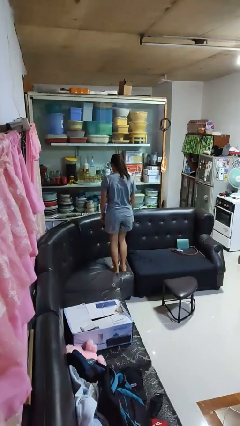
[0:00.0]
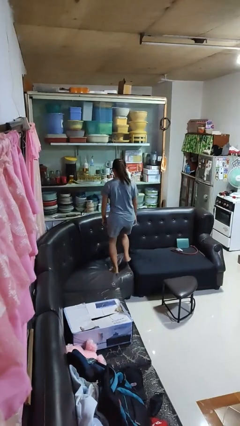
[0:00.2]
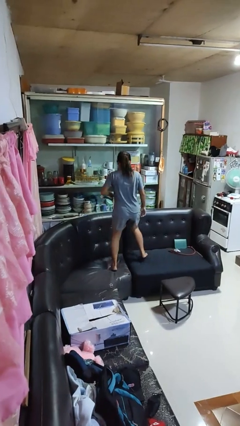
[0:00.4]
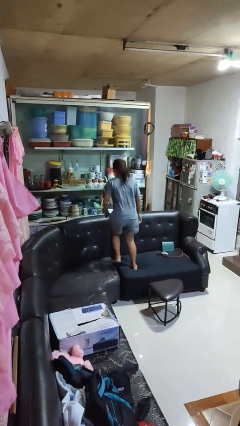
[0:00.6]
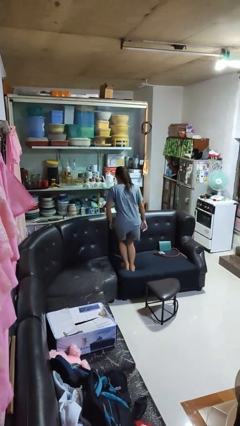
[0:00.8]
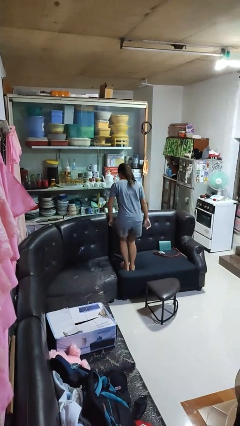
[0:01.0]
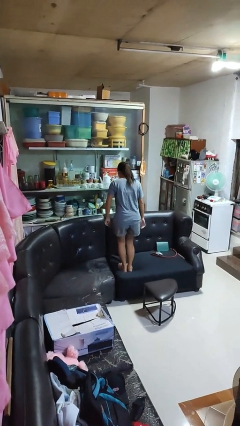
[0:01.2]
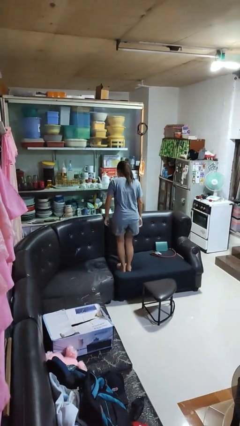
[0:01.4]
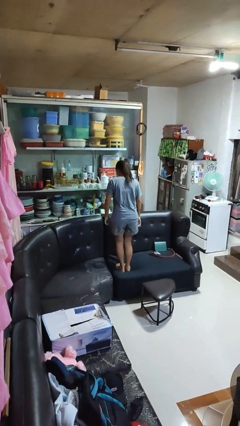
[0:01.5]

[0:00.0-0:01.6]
person jumps on couch

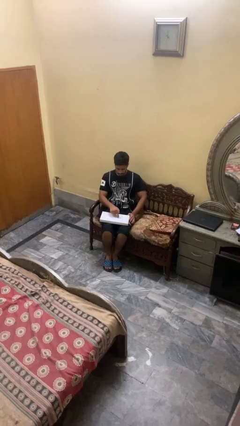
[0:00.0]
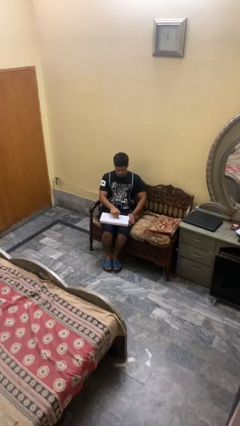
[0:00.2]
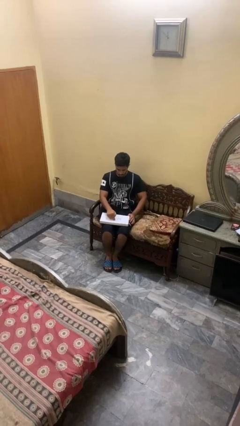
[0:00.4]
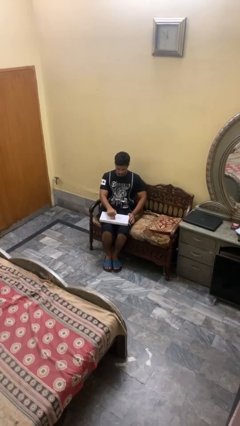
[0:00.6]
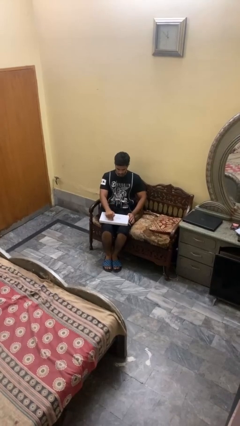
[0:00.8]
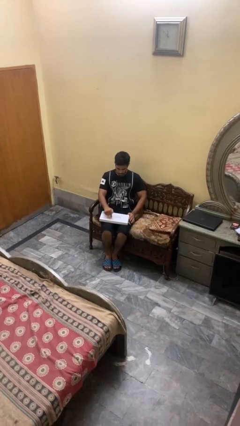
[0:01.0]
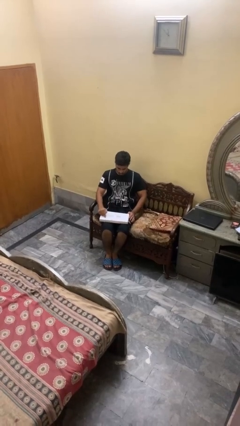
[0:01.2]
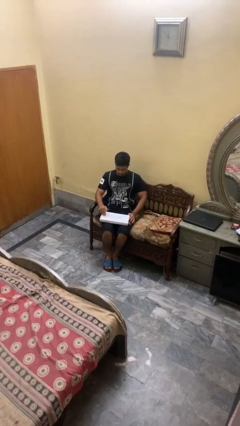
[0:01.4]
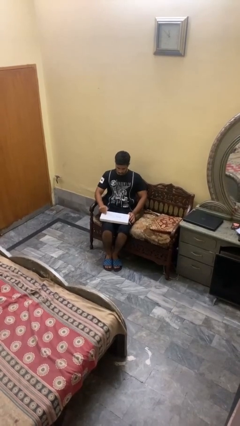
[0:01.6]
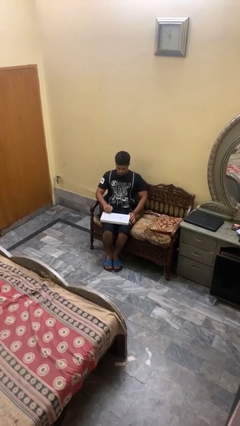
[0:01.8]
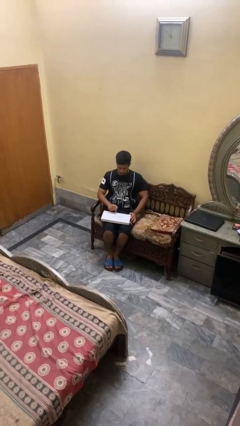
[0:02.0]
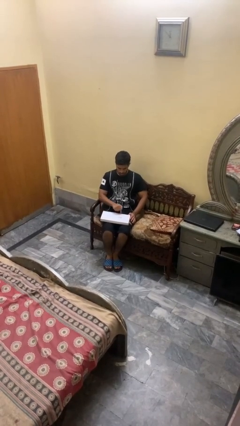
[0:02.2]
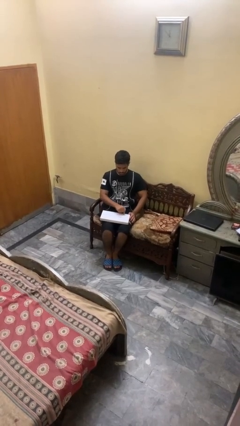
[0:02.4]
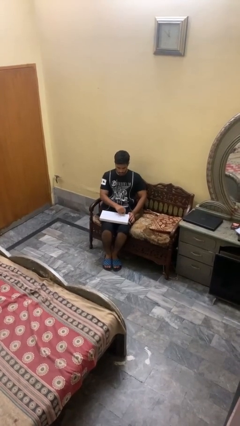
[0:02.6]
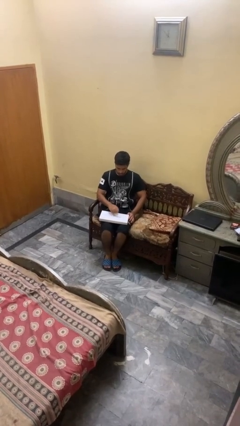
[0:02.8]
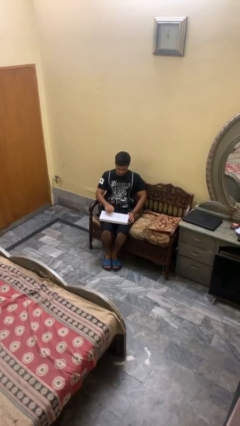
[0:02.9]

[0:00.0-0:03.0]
person taps object with finger

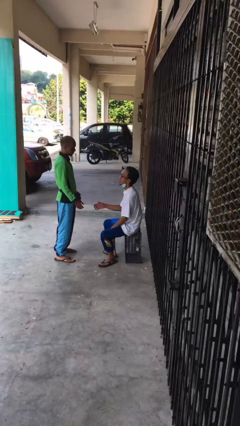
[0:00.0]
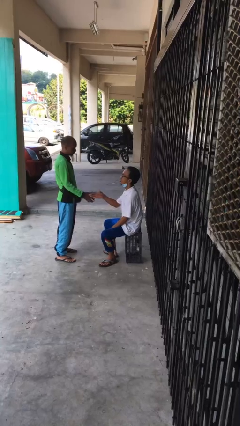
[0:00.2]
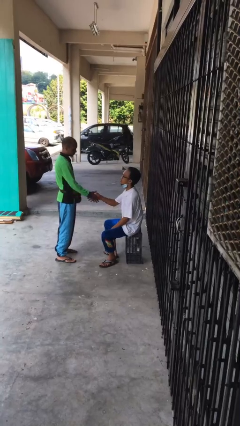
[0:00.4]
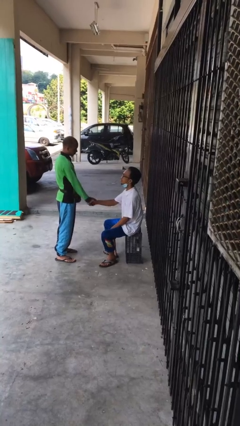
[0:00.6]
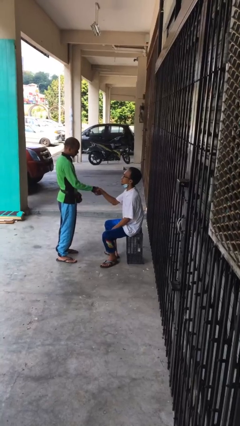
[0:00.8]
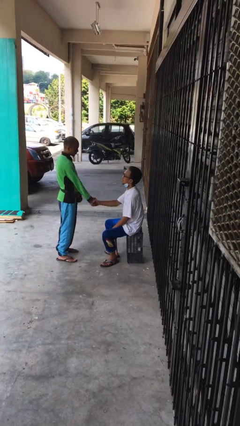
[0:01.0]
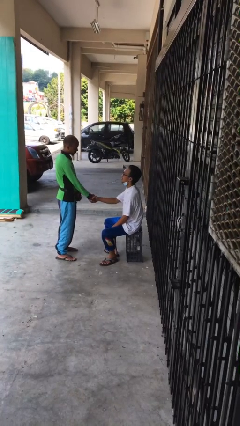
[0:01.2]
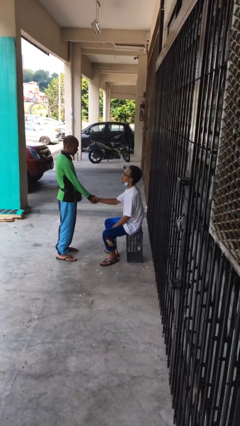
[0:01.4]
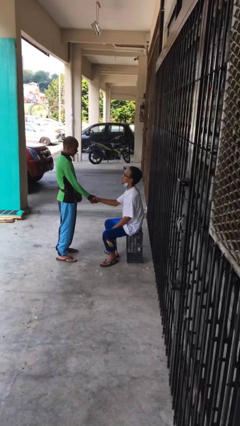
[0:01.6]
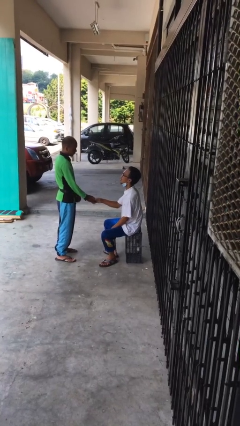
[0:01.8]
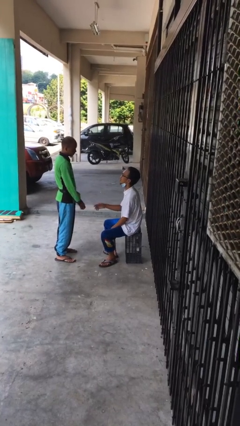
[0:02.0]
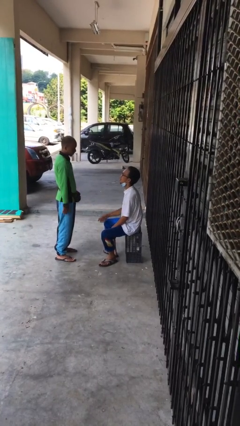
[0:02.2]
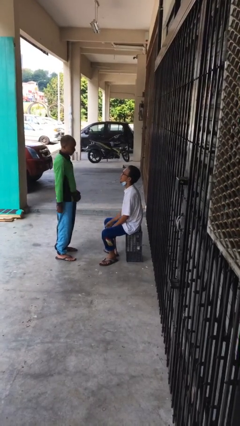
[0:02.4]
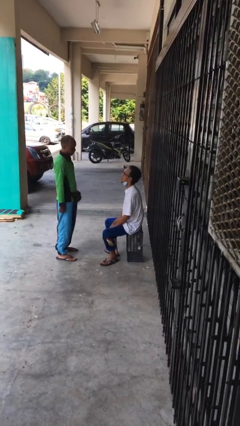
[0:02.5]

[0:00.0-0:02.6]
person shakes hand

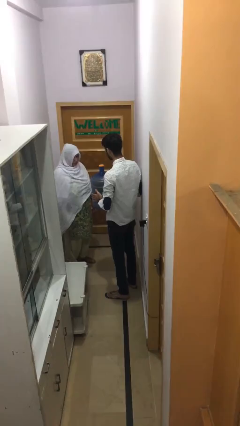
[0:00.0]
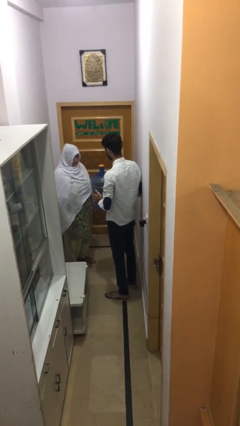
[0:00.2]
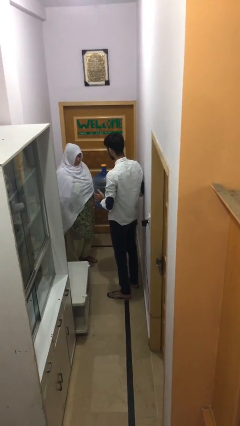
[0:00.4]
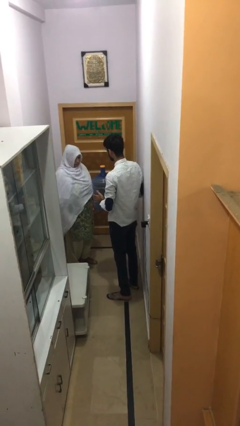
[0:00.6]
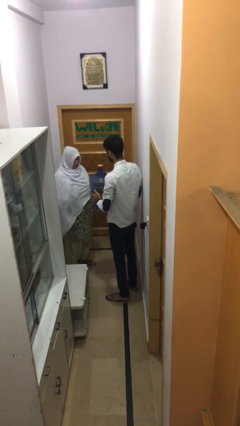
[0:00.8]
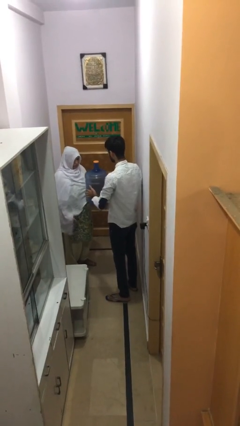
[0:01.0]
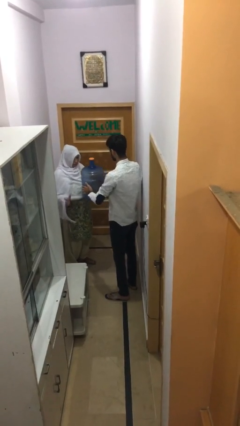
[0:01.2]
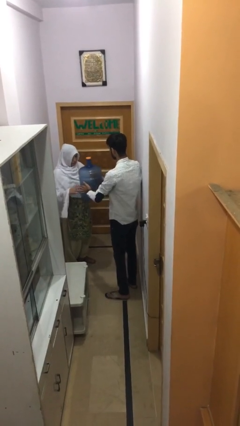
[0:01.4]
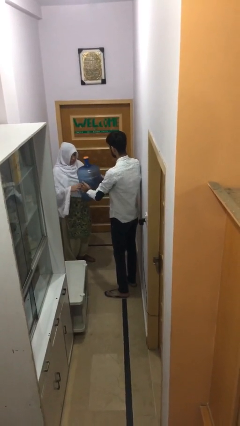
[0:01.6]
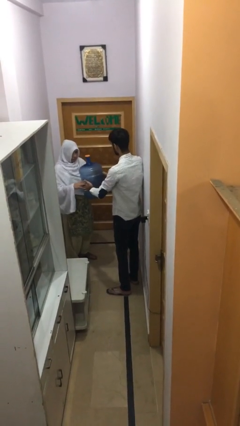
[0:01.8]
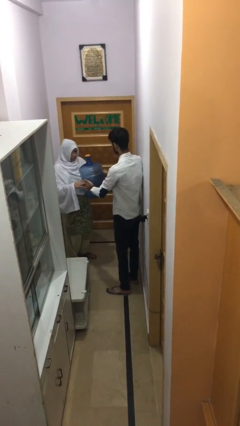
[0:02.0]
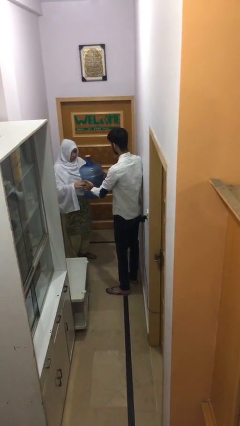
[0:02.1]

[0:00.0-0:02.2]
person transfers object to person

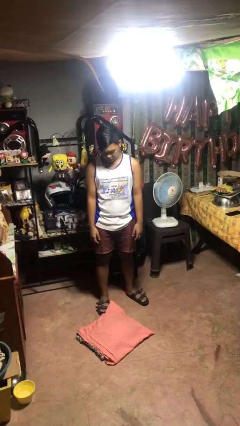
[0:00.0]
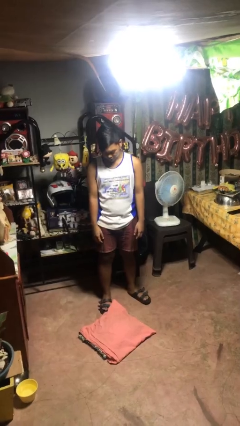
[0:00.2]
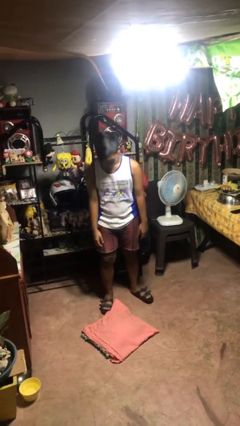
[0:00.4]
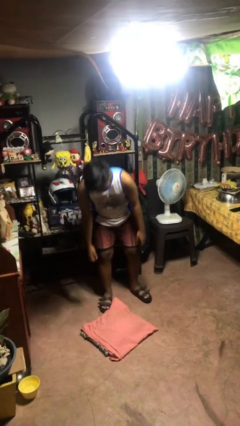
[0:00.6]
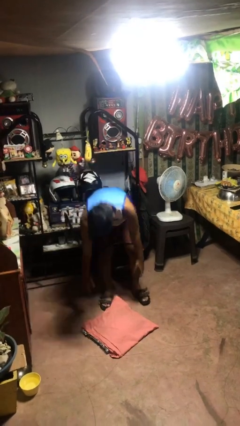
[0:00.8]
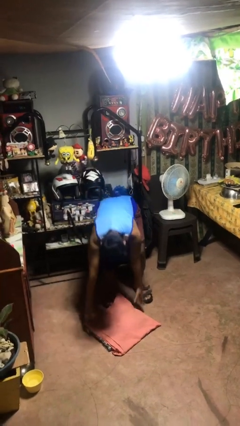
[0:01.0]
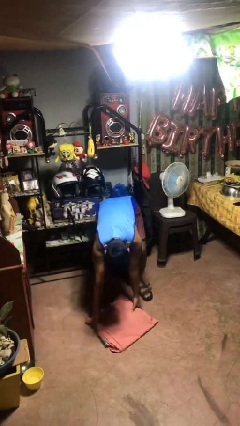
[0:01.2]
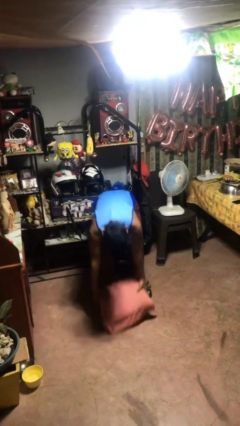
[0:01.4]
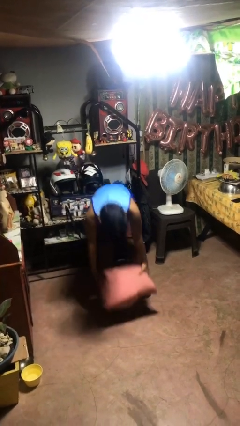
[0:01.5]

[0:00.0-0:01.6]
person picks up object from floor

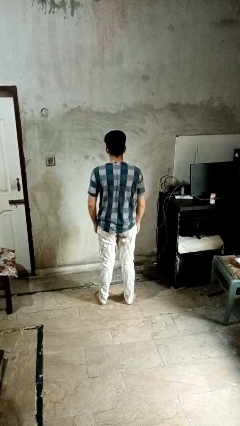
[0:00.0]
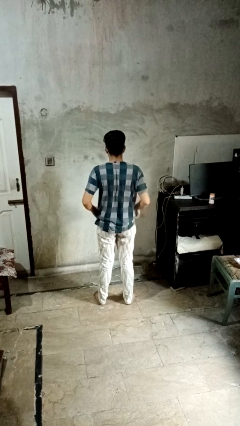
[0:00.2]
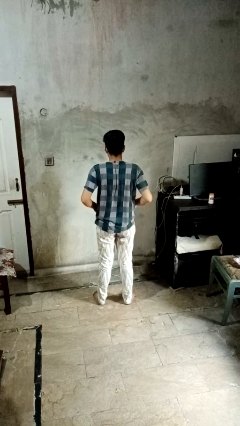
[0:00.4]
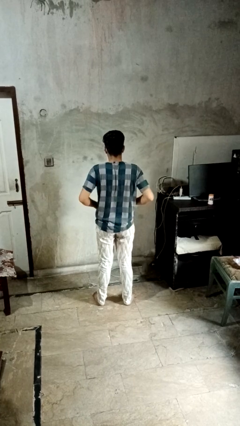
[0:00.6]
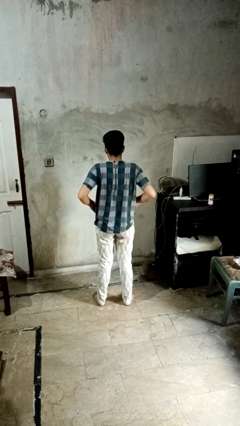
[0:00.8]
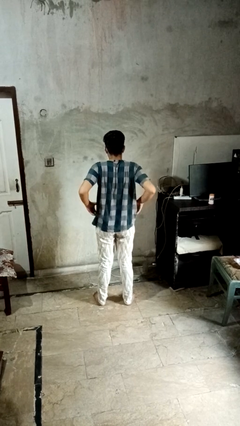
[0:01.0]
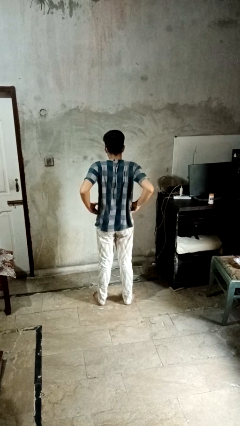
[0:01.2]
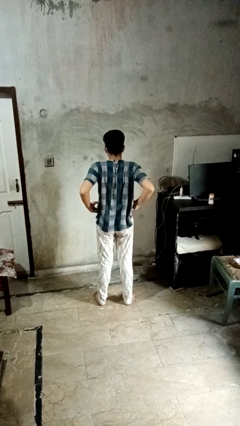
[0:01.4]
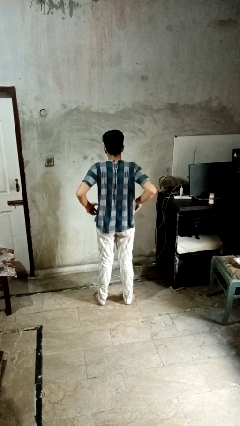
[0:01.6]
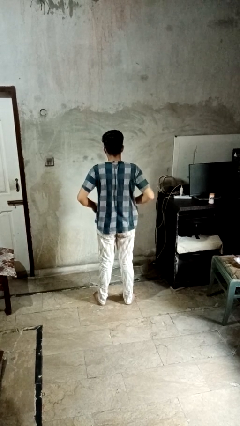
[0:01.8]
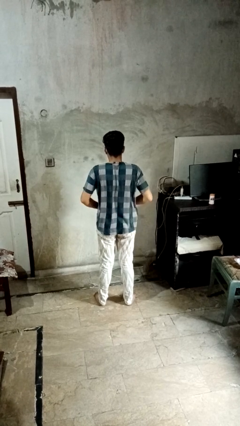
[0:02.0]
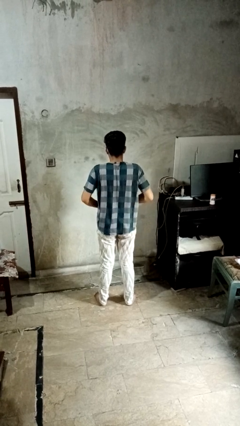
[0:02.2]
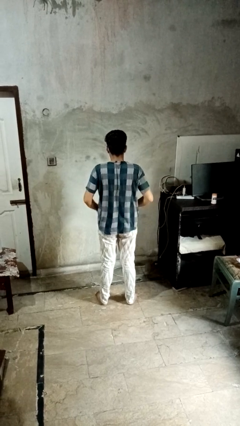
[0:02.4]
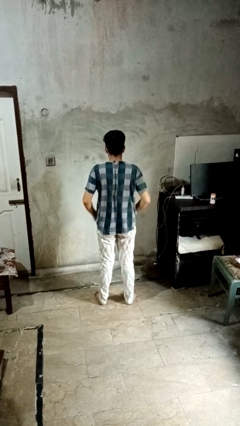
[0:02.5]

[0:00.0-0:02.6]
person hikes up pants

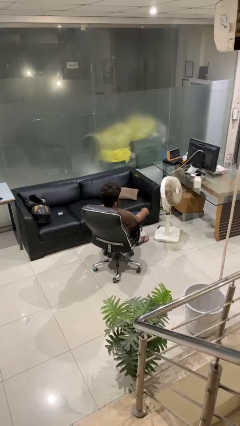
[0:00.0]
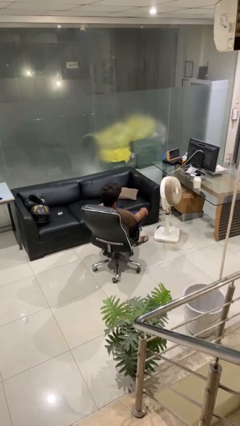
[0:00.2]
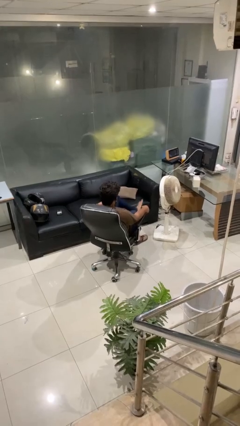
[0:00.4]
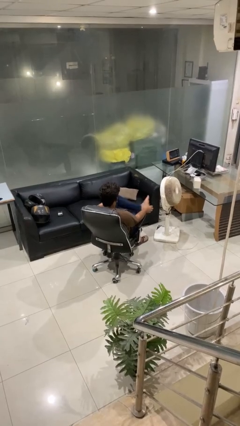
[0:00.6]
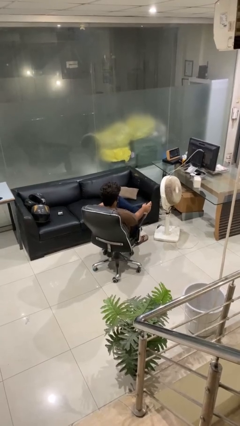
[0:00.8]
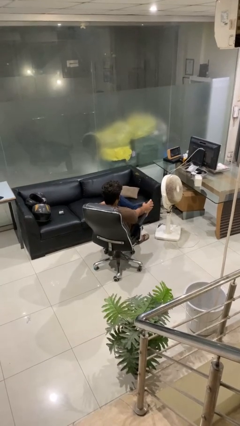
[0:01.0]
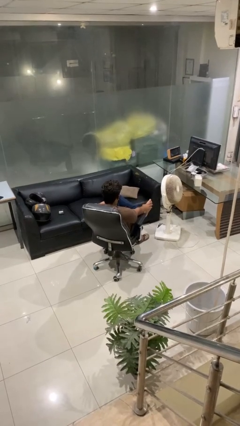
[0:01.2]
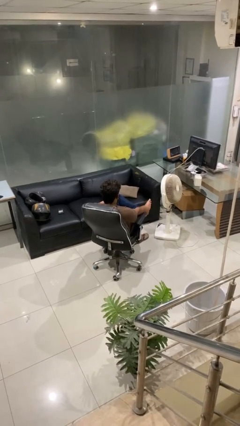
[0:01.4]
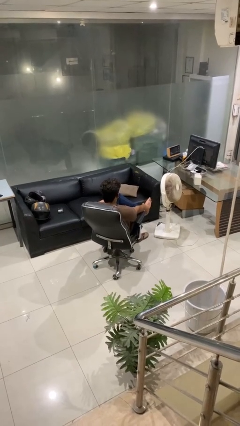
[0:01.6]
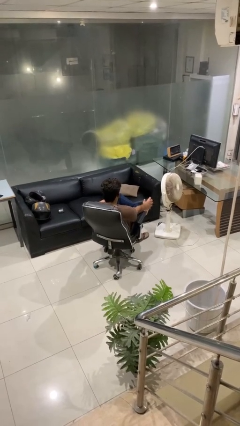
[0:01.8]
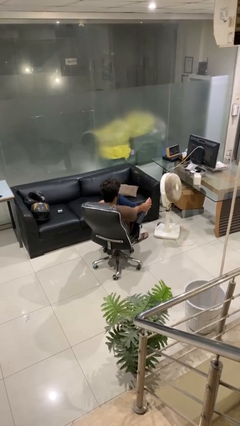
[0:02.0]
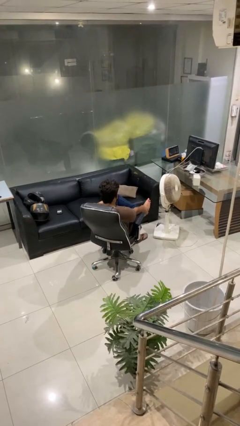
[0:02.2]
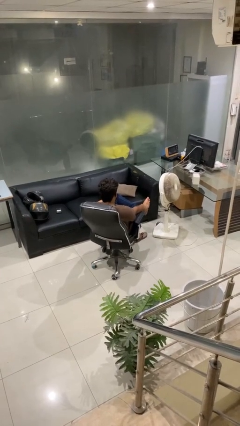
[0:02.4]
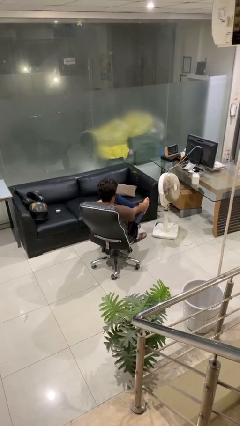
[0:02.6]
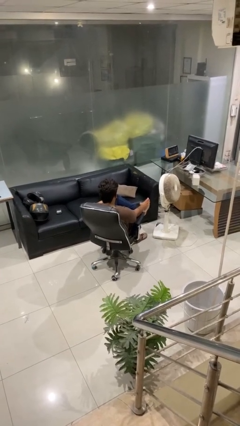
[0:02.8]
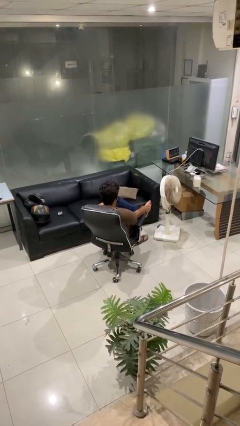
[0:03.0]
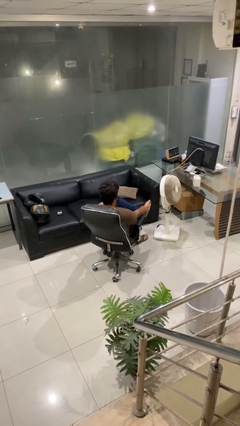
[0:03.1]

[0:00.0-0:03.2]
person rubs foot

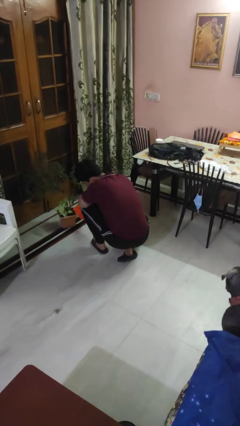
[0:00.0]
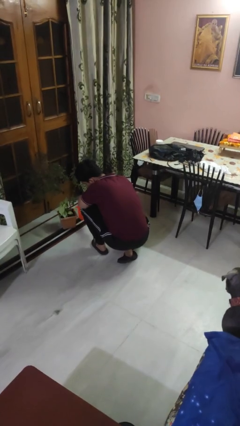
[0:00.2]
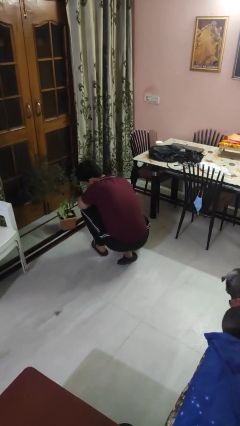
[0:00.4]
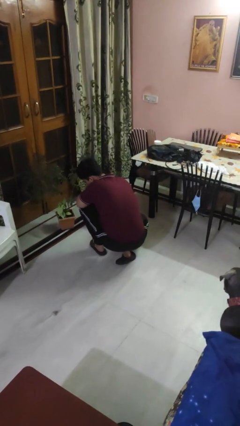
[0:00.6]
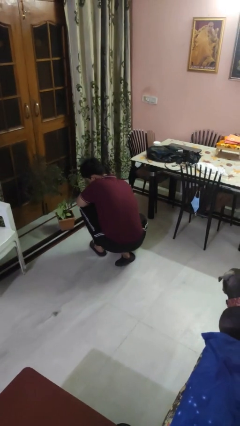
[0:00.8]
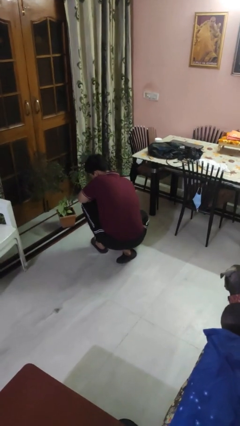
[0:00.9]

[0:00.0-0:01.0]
person waters houseplant
